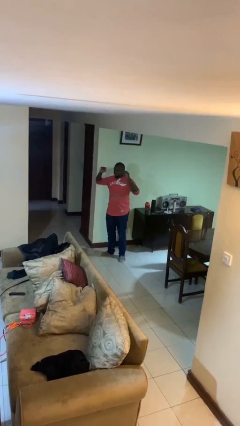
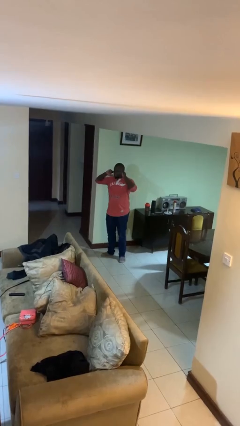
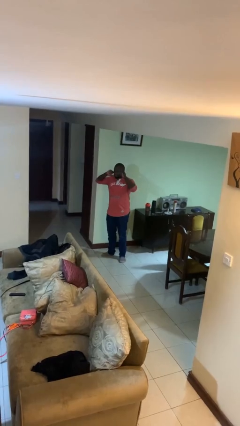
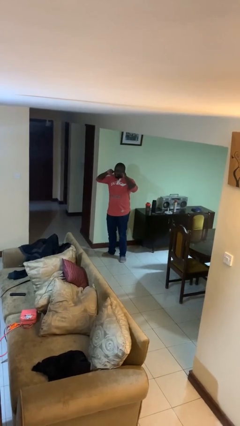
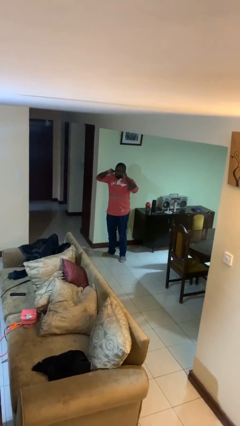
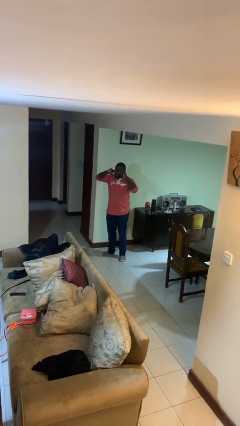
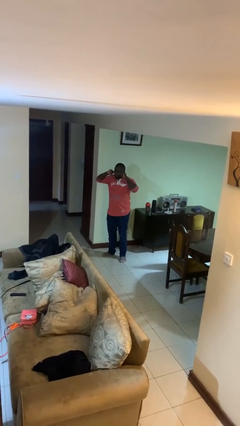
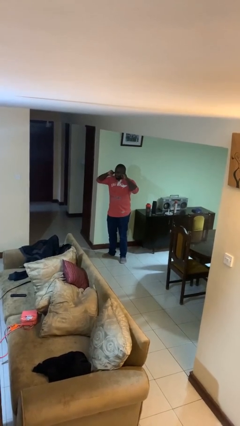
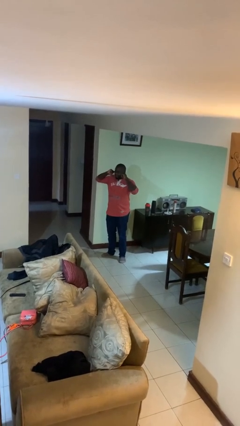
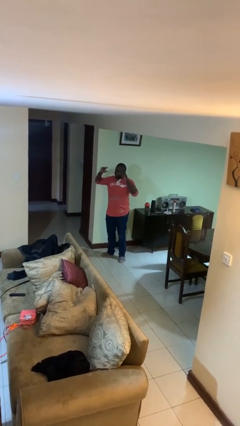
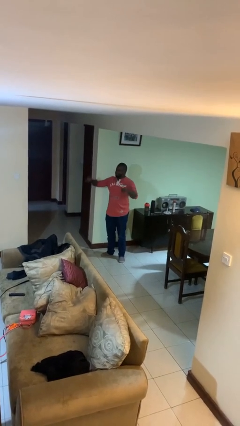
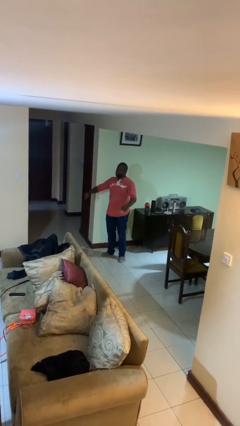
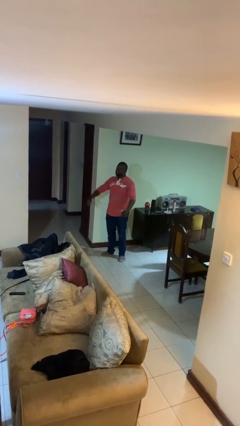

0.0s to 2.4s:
person puts fingers in ear

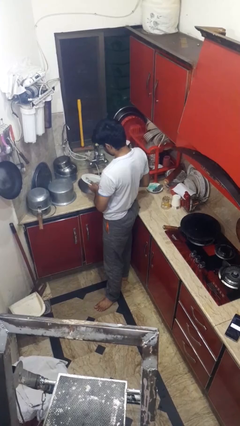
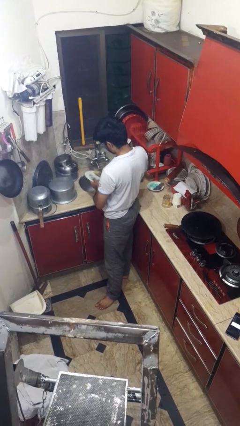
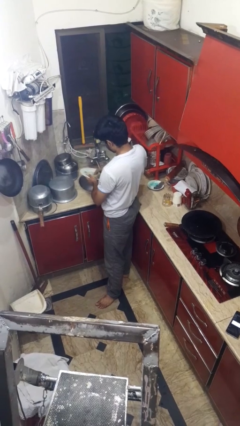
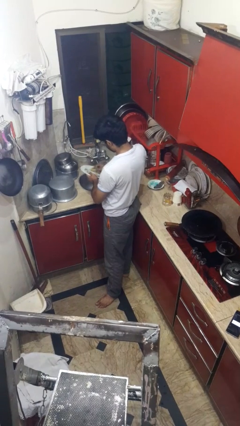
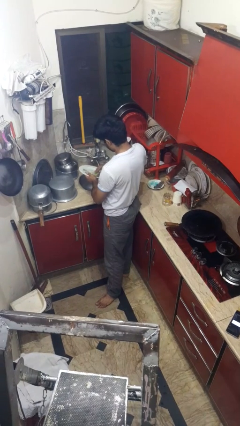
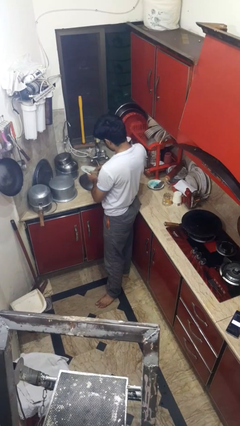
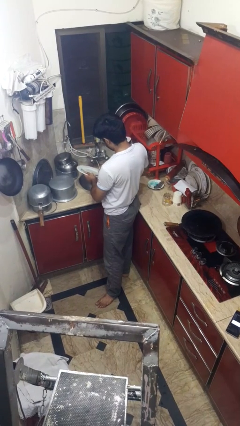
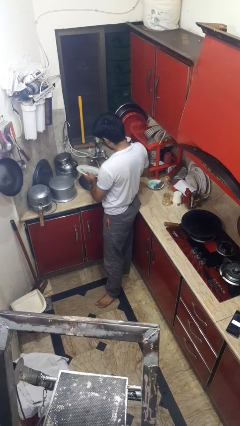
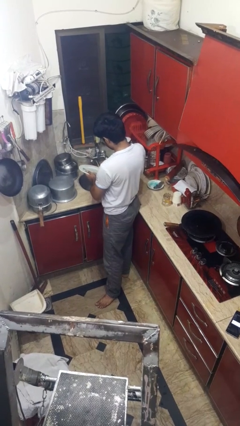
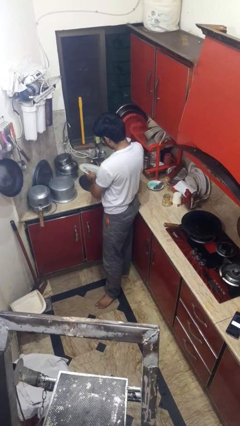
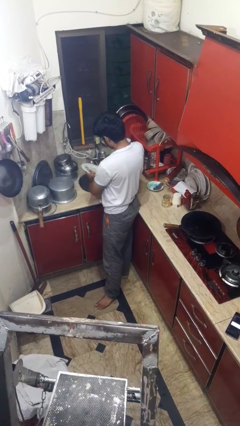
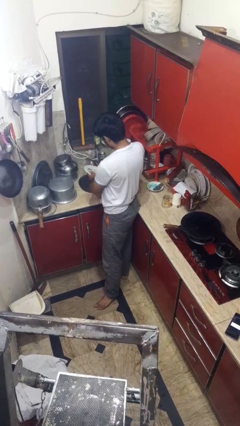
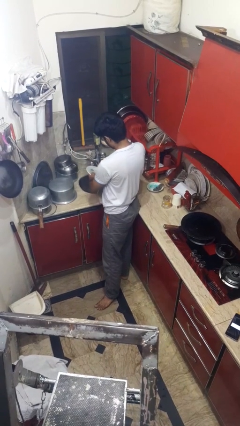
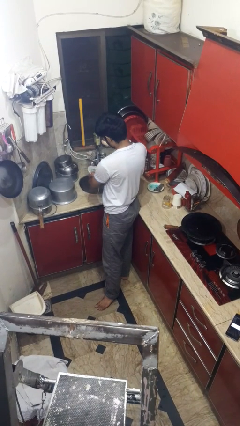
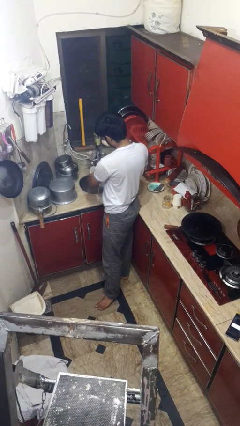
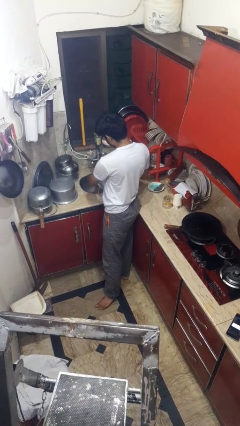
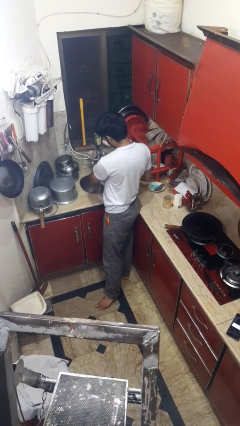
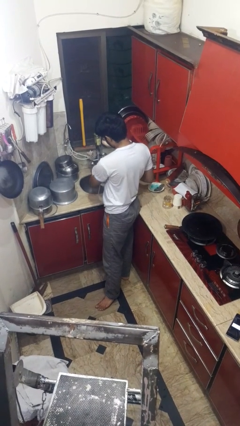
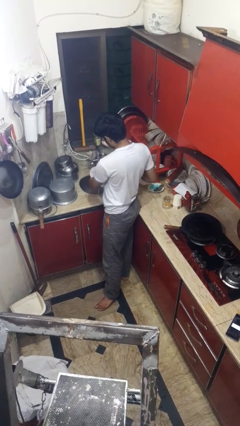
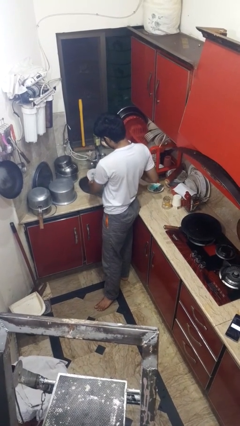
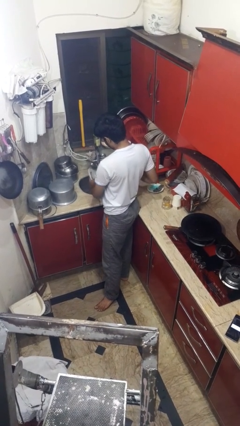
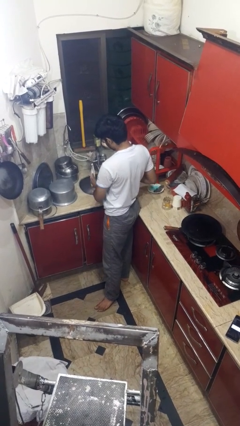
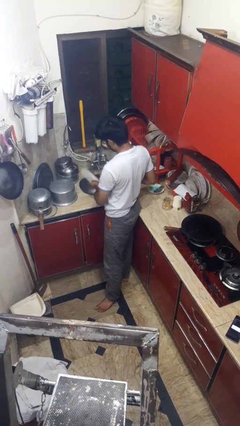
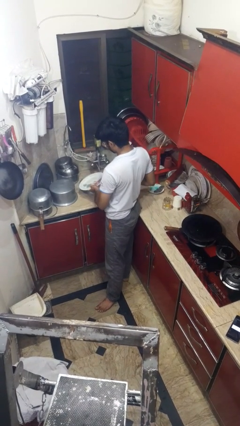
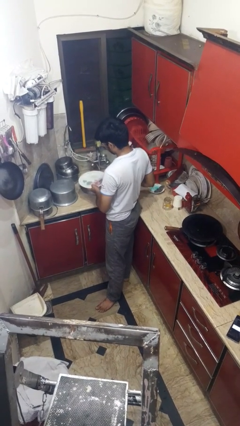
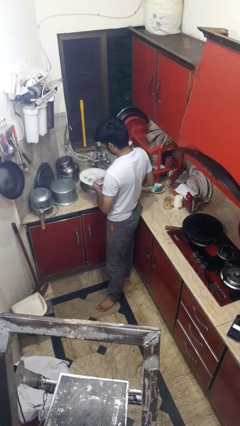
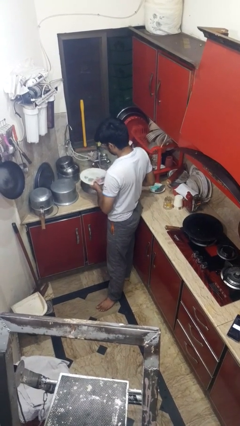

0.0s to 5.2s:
person washes dish

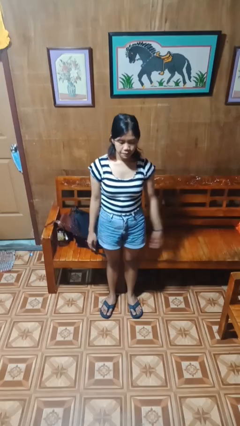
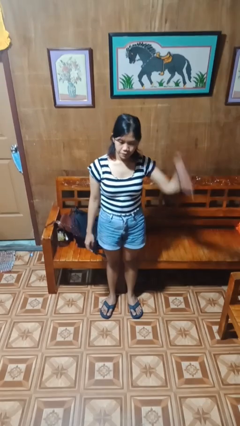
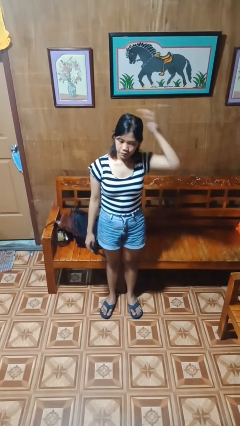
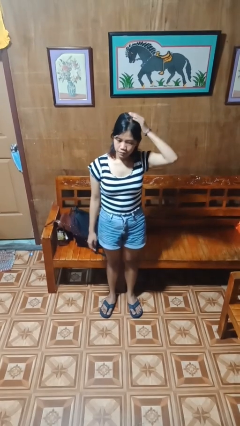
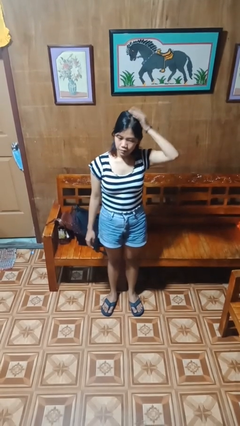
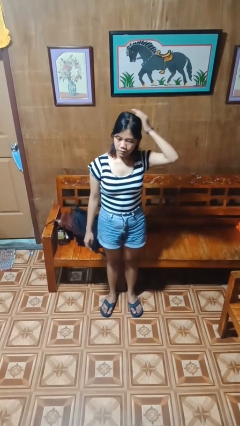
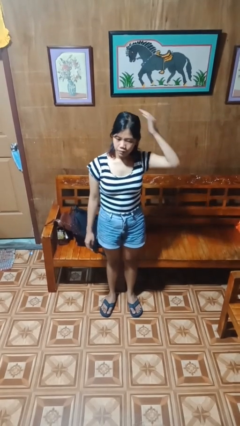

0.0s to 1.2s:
person pats head

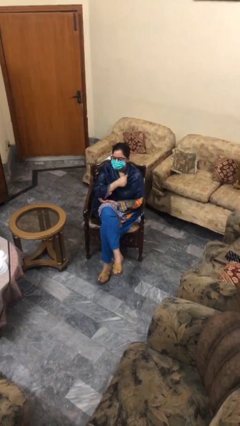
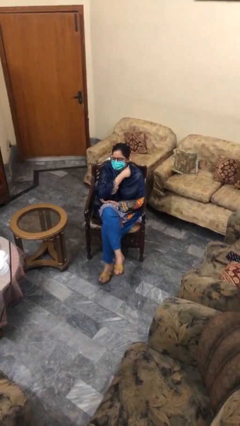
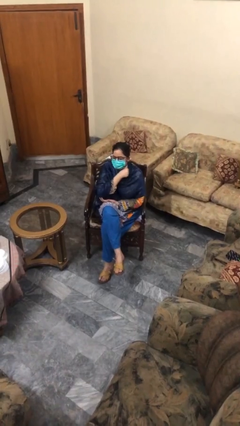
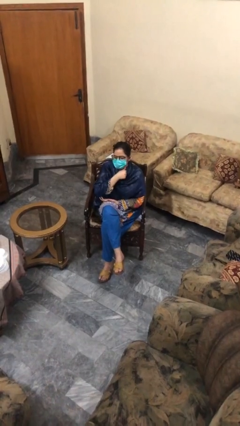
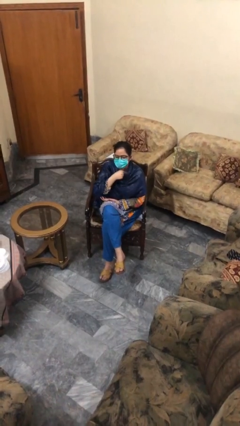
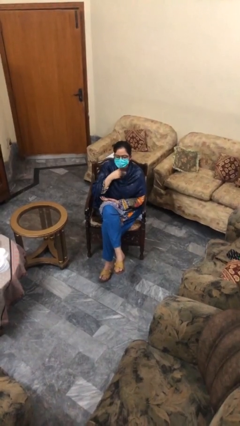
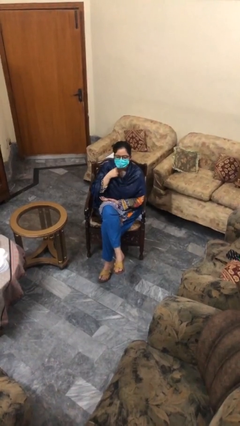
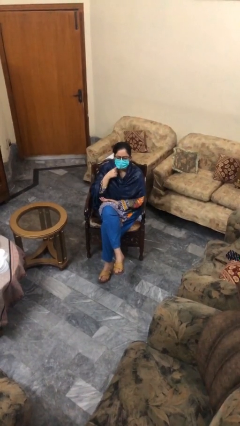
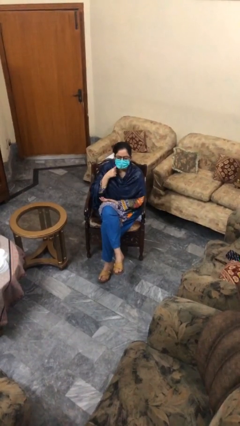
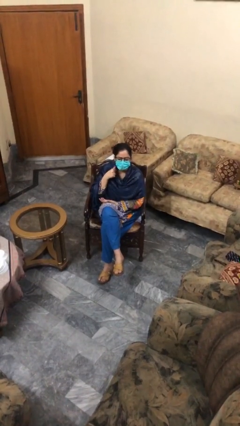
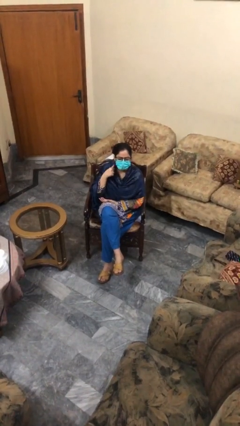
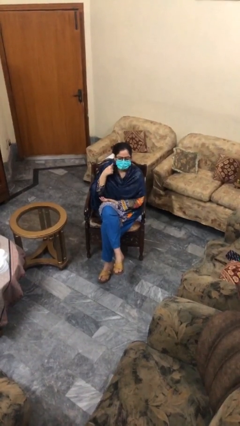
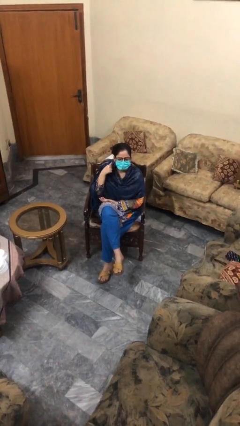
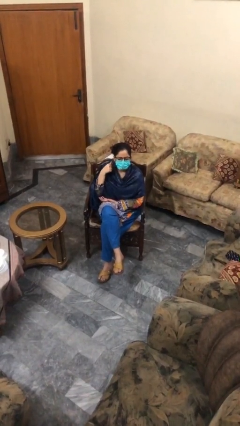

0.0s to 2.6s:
person gestures cut

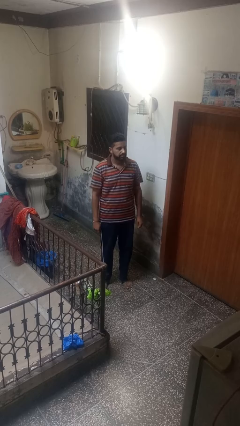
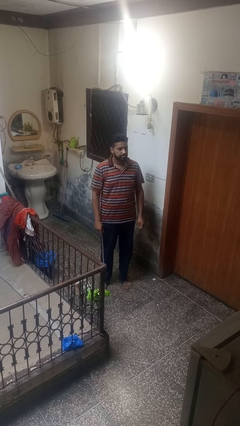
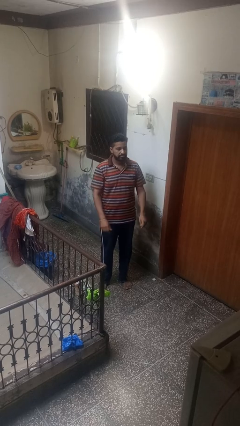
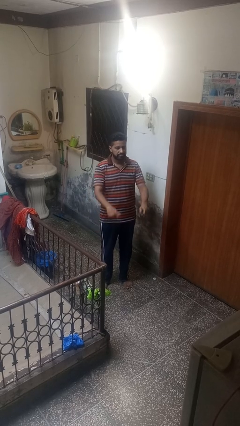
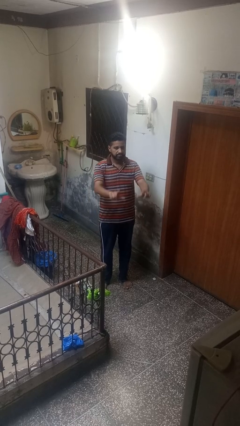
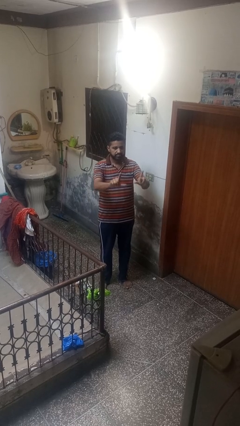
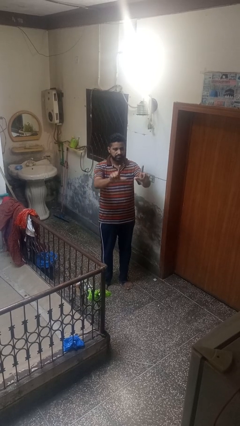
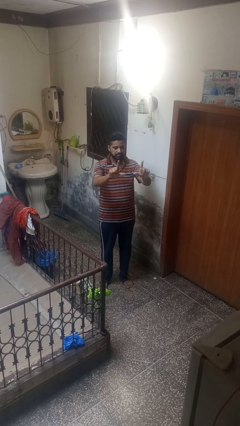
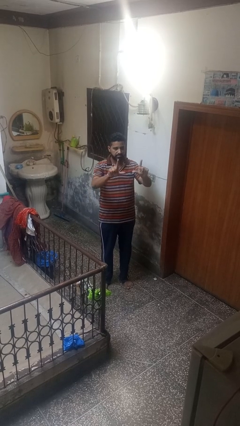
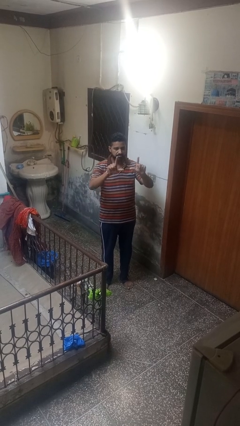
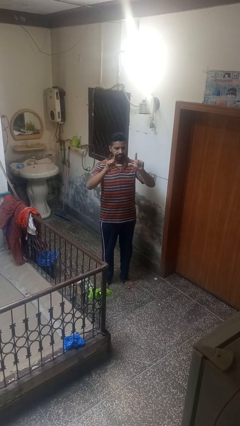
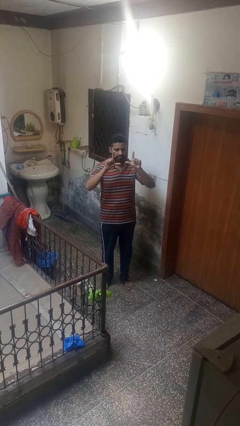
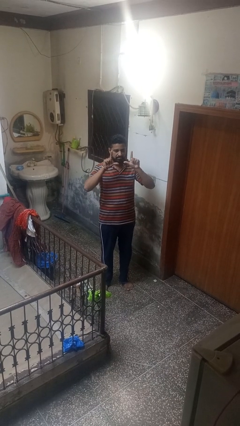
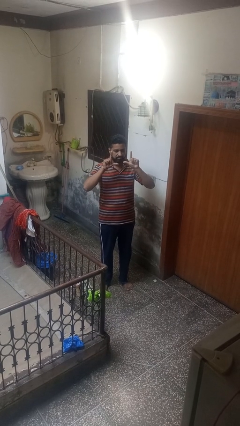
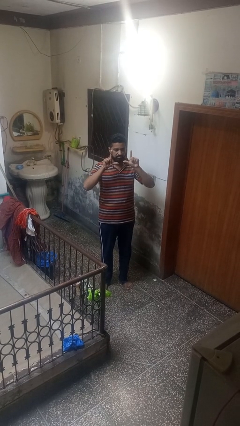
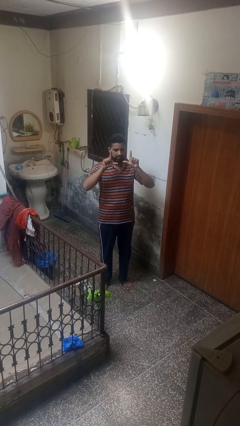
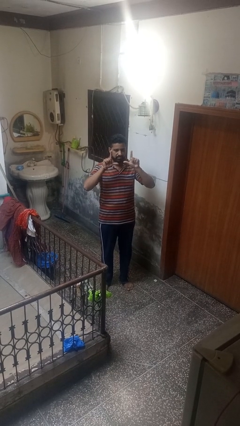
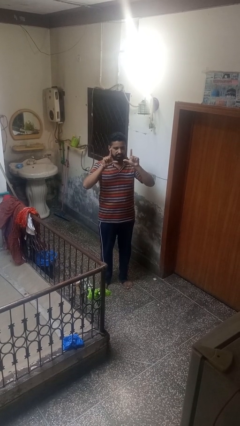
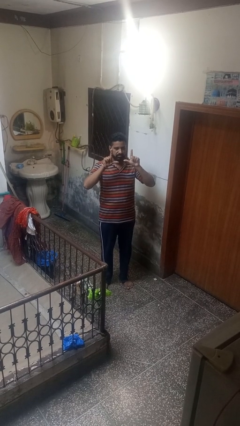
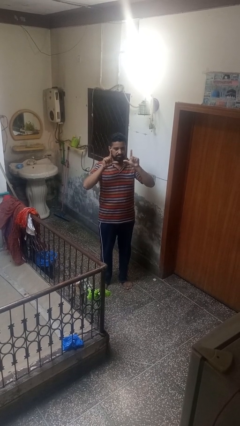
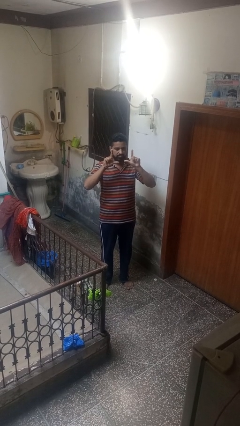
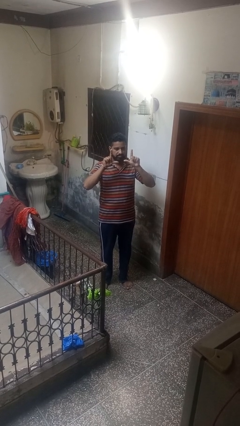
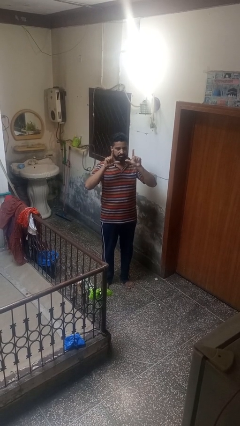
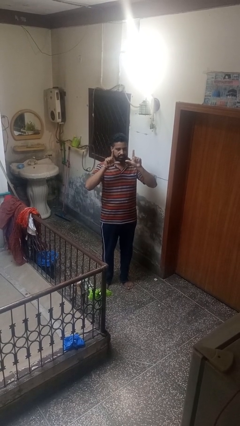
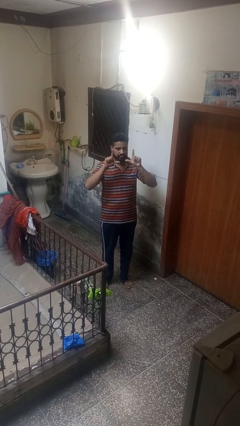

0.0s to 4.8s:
person gestures zoom in

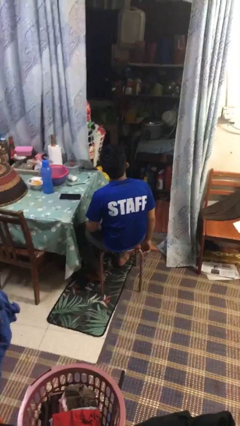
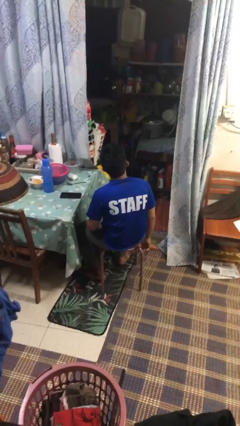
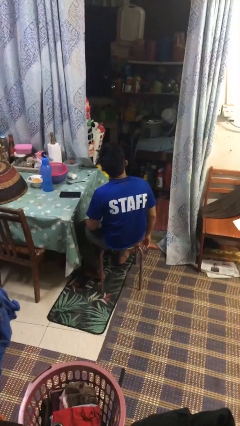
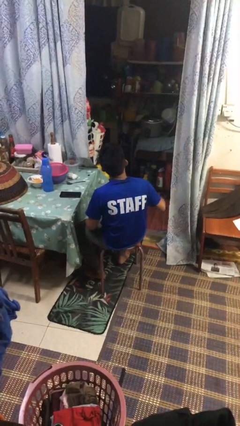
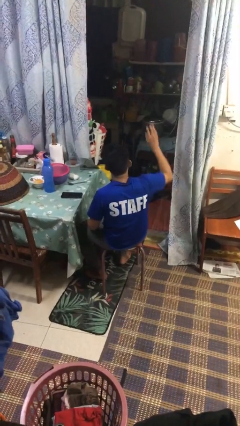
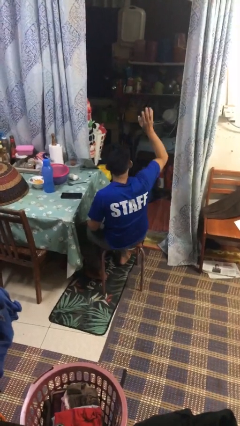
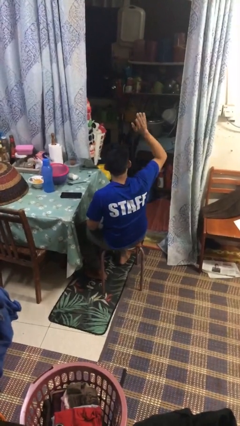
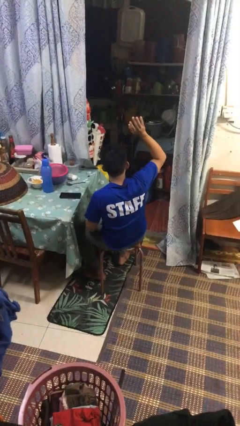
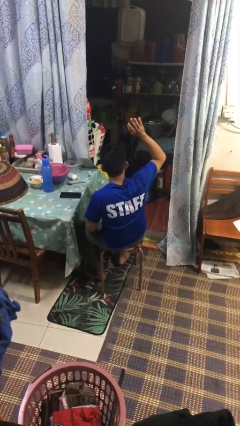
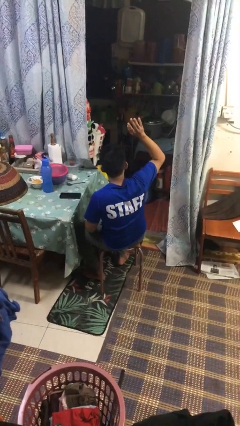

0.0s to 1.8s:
person gestures raise hand
